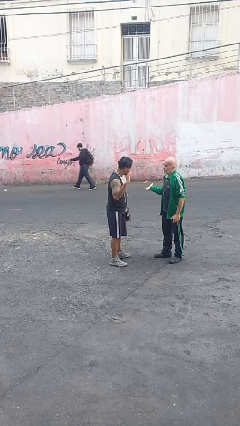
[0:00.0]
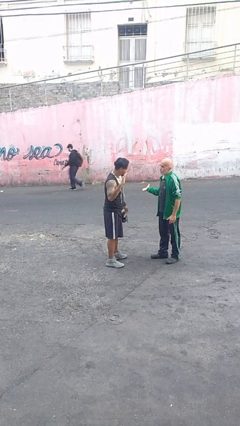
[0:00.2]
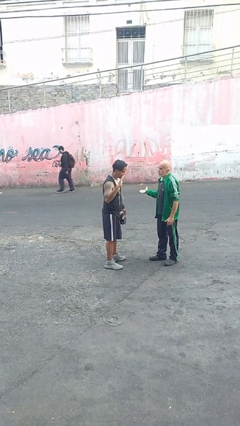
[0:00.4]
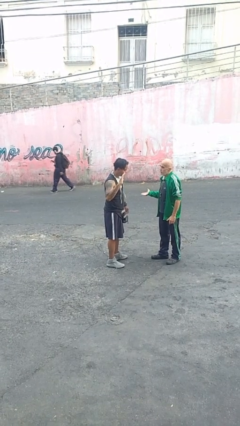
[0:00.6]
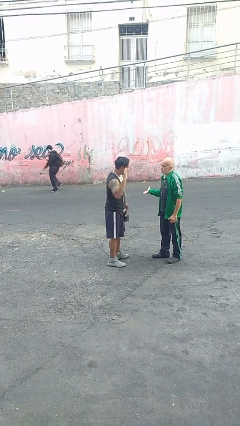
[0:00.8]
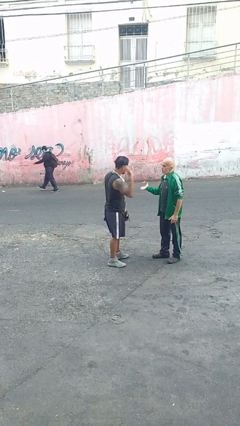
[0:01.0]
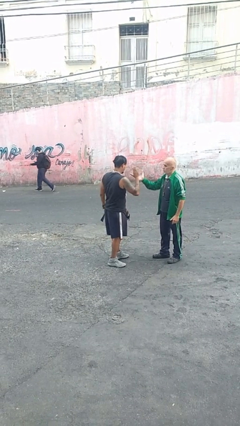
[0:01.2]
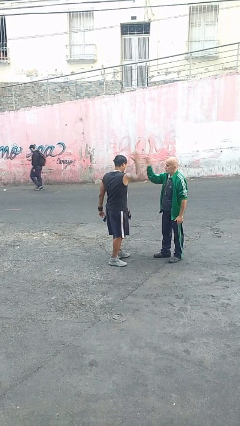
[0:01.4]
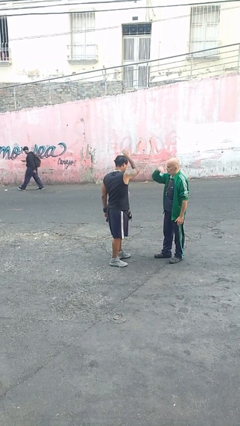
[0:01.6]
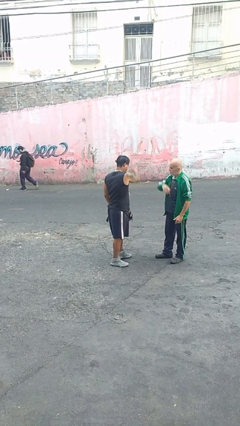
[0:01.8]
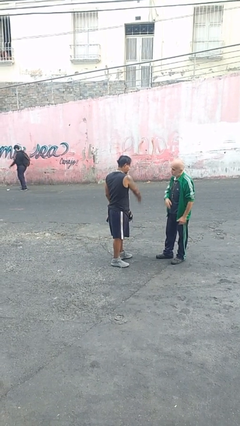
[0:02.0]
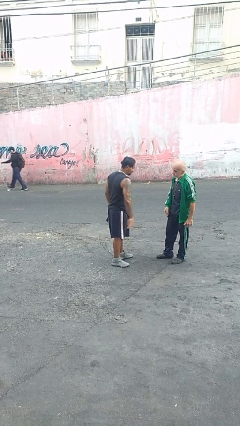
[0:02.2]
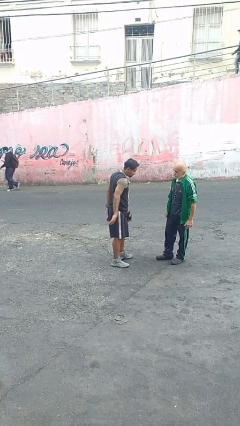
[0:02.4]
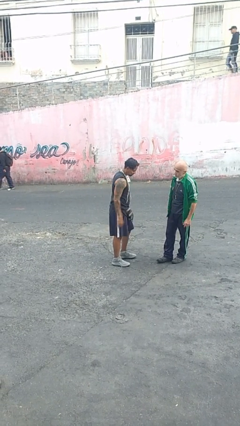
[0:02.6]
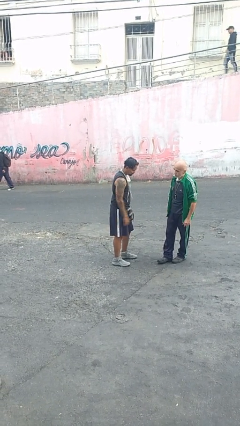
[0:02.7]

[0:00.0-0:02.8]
person highfives hand

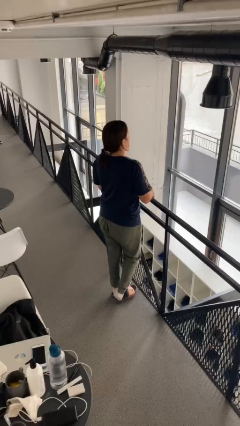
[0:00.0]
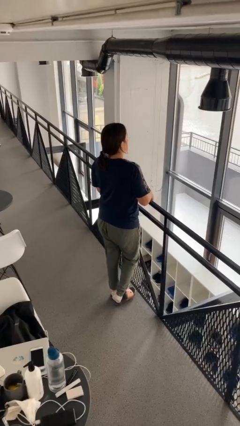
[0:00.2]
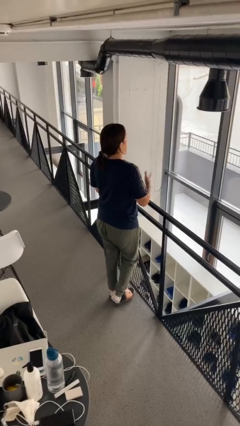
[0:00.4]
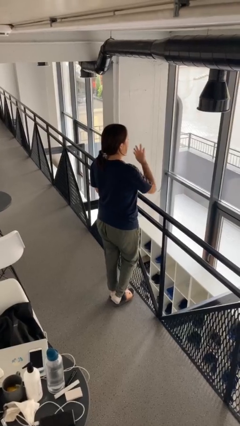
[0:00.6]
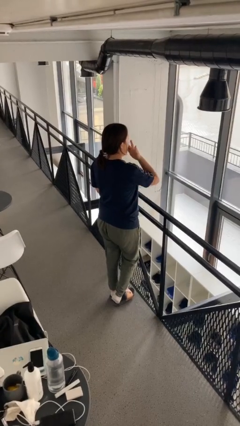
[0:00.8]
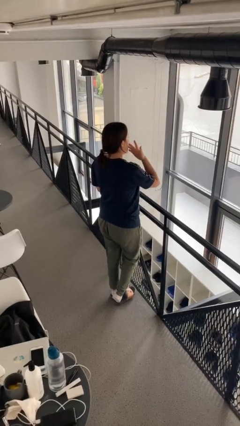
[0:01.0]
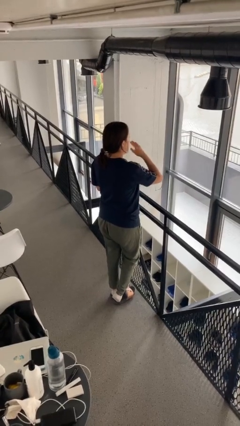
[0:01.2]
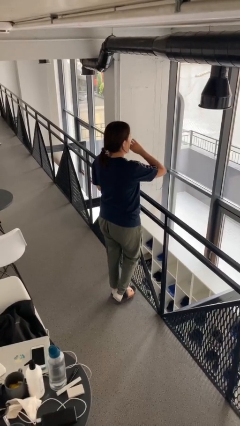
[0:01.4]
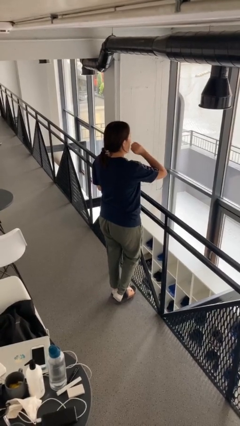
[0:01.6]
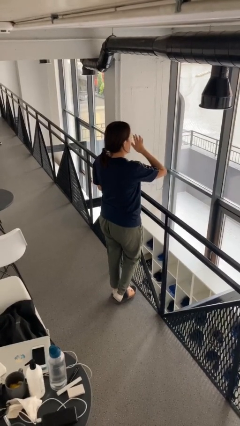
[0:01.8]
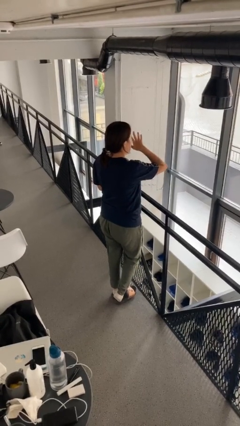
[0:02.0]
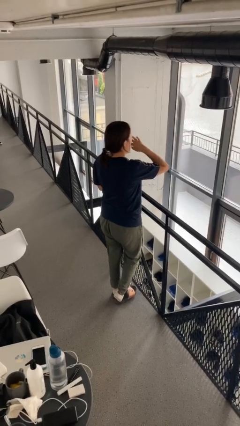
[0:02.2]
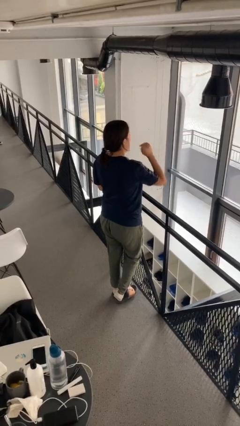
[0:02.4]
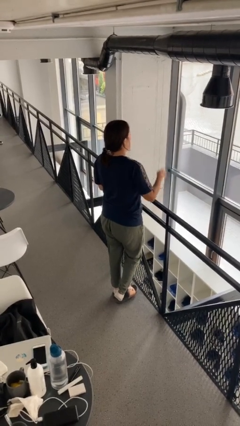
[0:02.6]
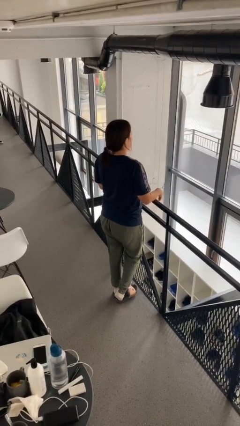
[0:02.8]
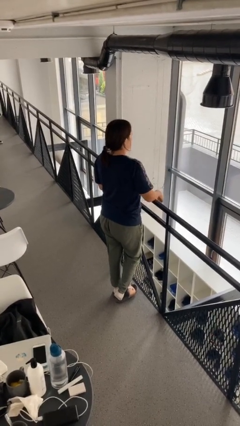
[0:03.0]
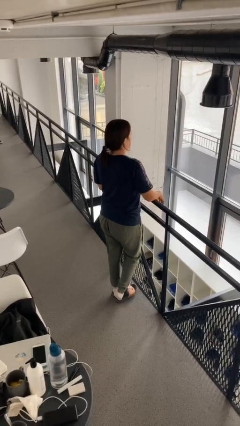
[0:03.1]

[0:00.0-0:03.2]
person licks fingers

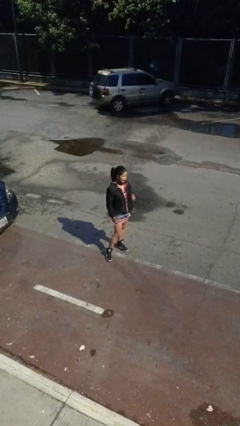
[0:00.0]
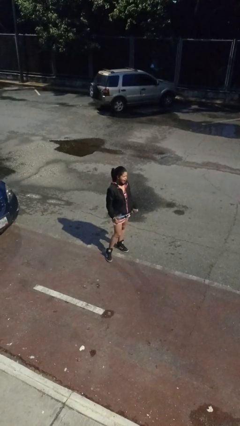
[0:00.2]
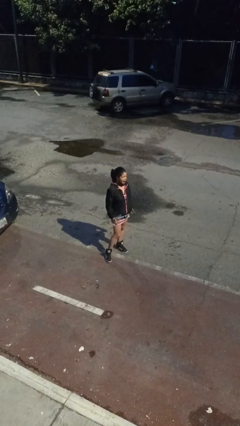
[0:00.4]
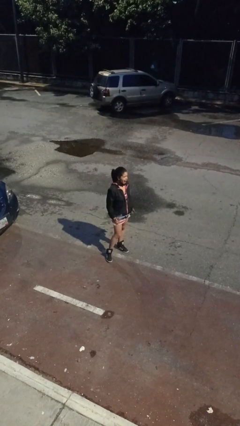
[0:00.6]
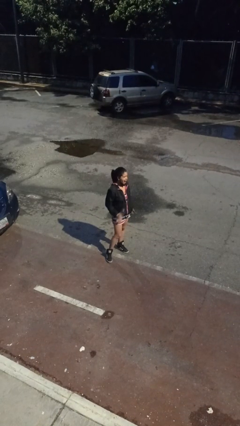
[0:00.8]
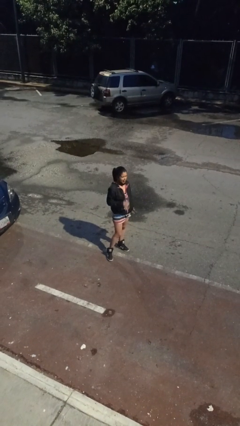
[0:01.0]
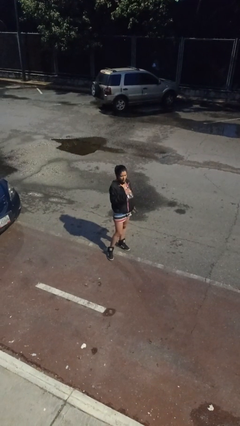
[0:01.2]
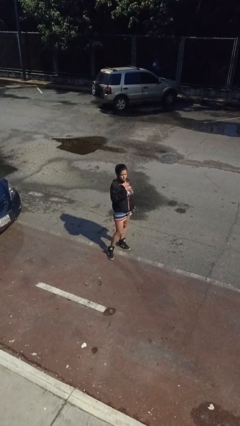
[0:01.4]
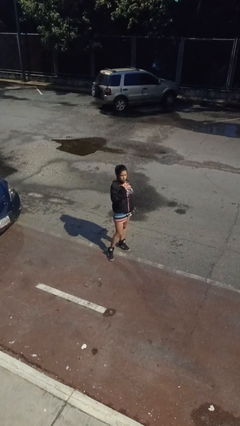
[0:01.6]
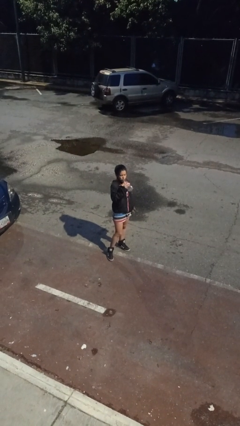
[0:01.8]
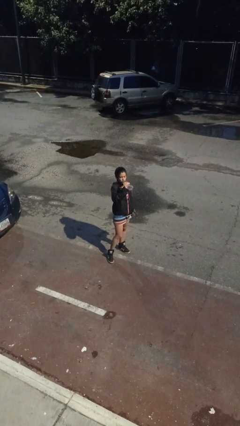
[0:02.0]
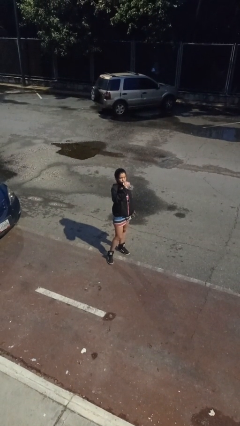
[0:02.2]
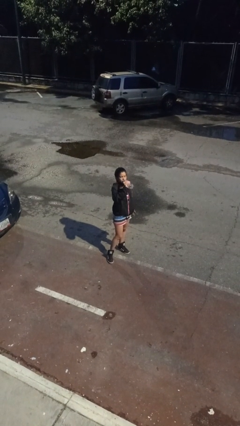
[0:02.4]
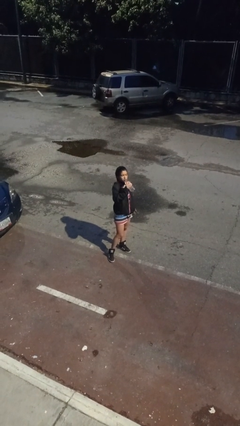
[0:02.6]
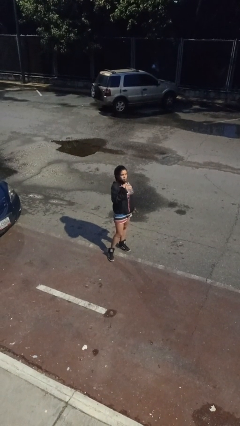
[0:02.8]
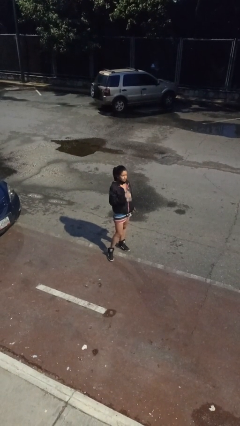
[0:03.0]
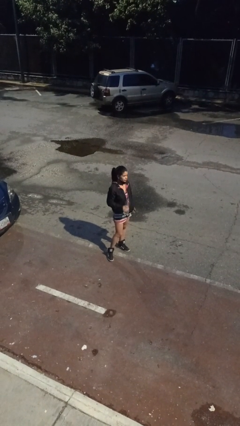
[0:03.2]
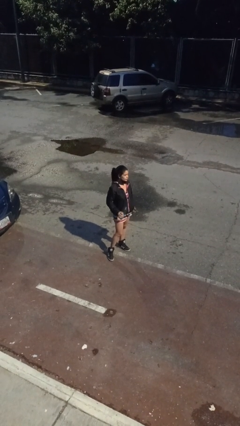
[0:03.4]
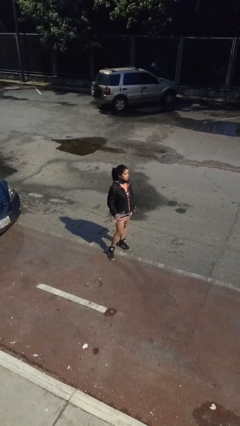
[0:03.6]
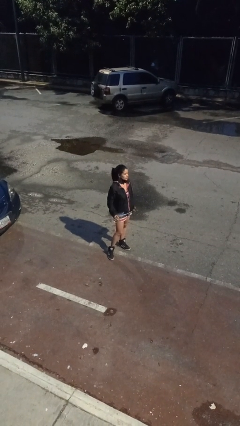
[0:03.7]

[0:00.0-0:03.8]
person drinks from bottle

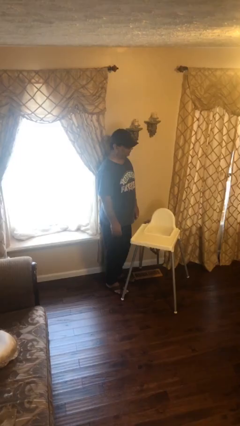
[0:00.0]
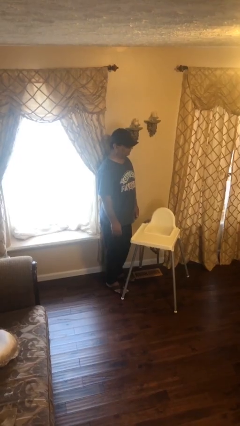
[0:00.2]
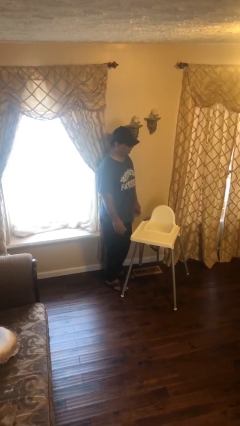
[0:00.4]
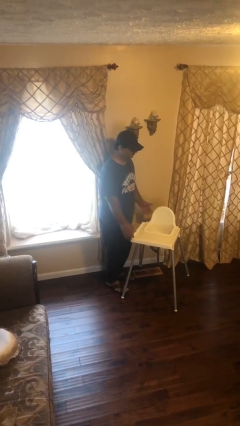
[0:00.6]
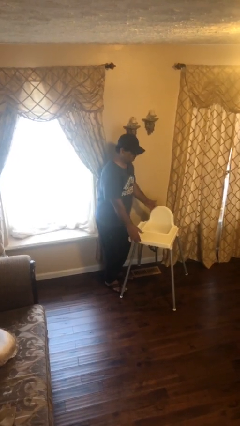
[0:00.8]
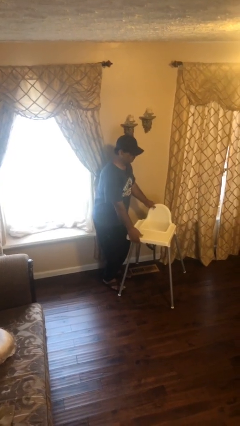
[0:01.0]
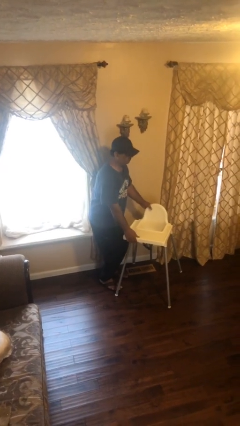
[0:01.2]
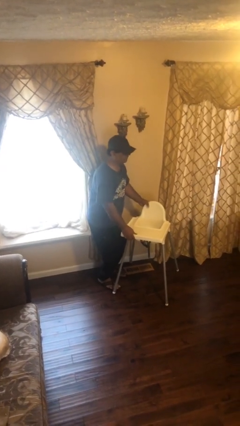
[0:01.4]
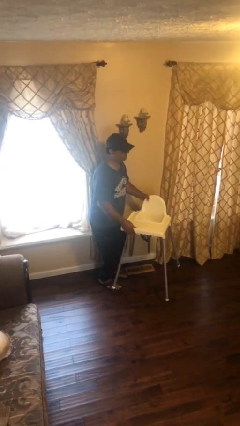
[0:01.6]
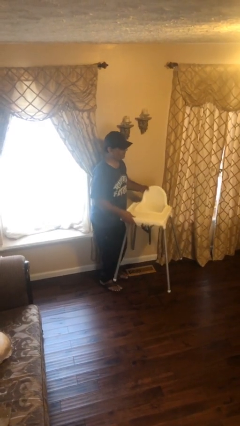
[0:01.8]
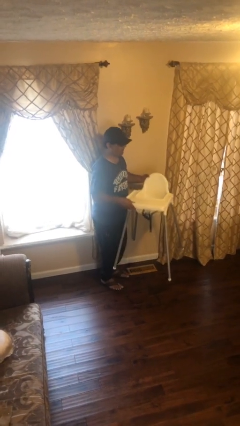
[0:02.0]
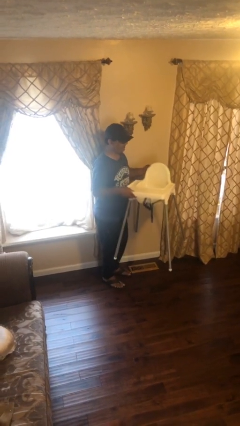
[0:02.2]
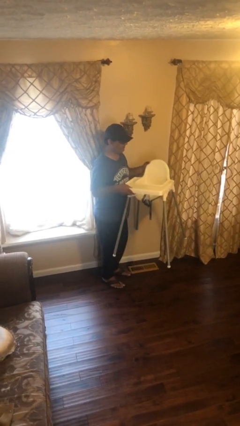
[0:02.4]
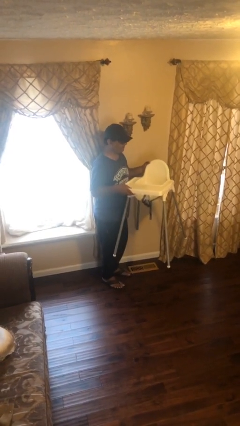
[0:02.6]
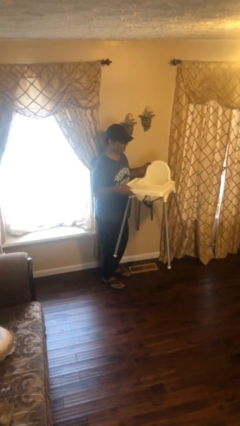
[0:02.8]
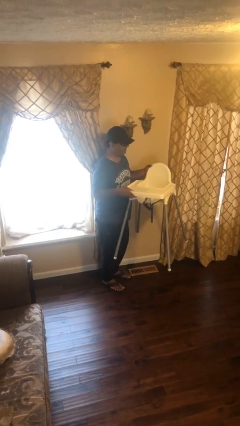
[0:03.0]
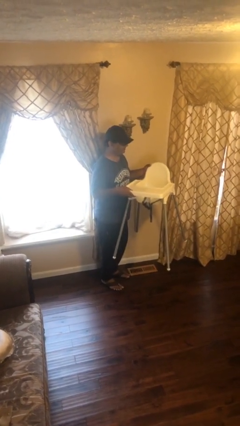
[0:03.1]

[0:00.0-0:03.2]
person picks up object from floor

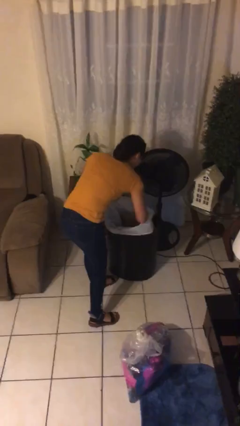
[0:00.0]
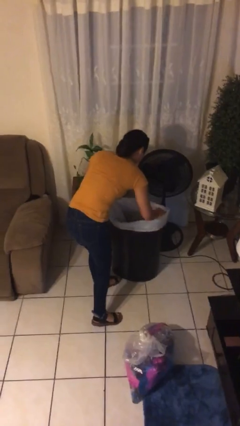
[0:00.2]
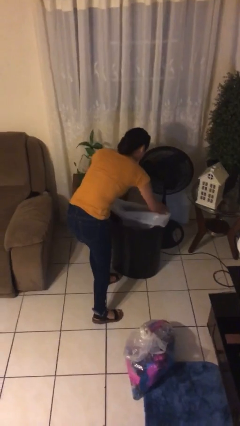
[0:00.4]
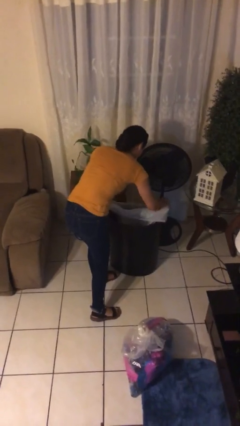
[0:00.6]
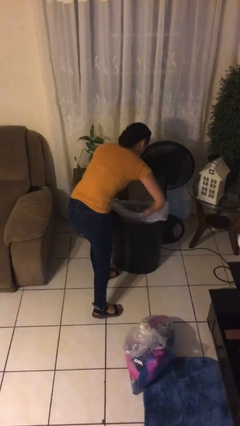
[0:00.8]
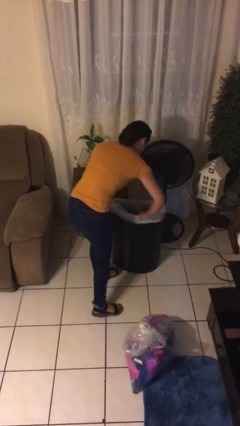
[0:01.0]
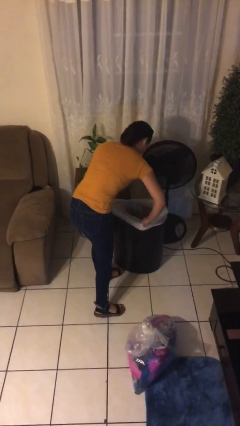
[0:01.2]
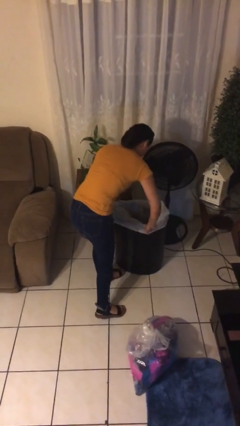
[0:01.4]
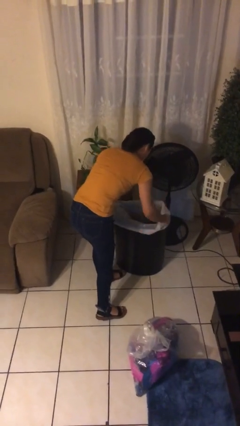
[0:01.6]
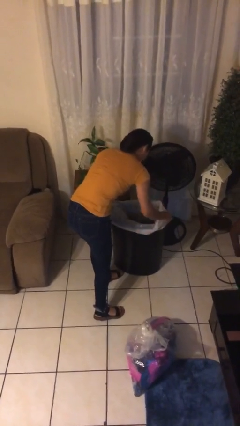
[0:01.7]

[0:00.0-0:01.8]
person inserts trashbag into trashcan

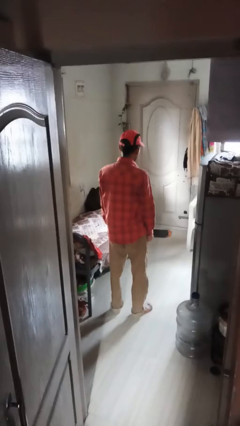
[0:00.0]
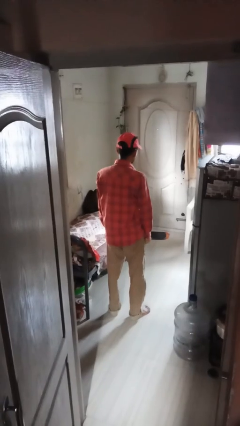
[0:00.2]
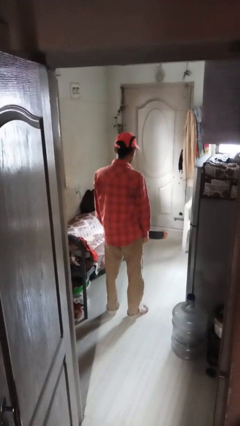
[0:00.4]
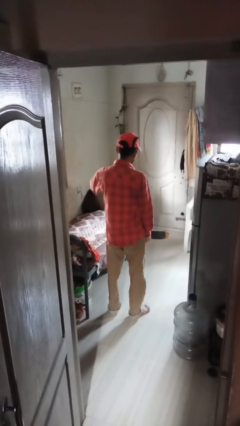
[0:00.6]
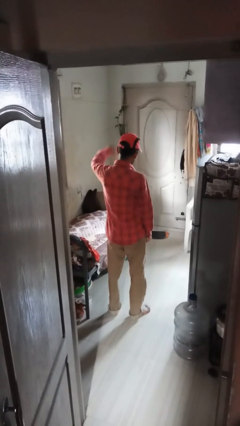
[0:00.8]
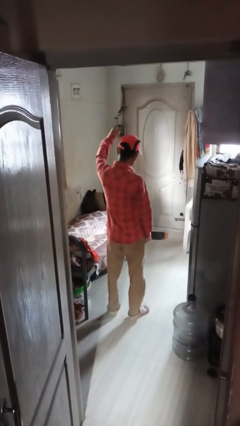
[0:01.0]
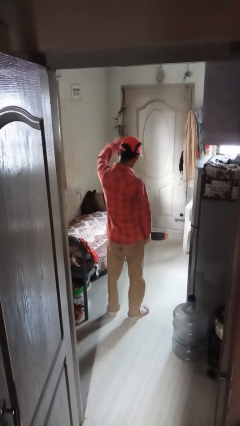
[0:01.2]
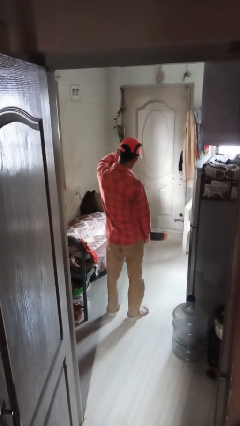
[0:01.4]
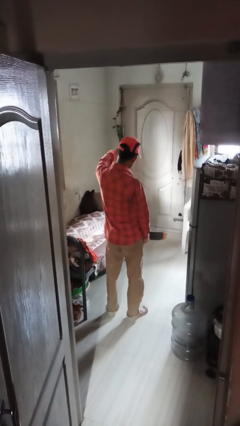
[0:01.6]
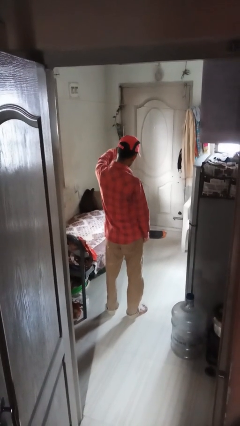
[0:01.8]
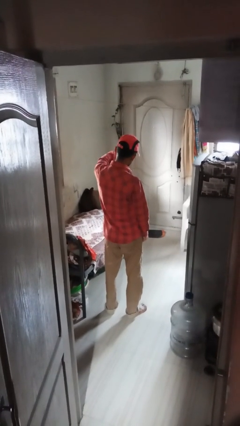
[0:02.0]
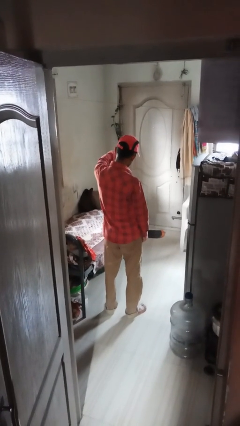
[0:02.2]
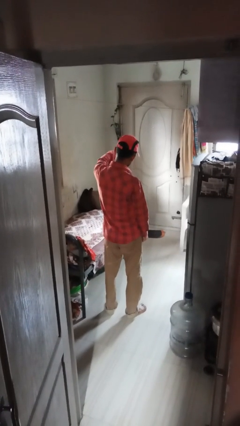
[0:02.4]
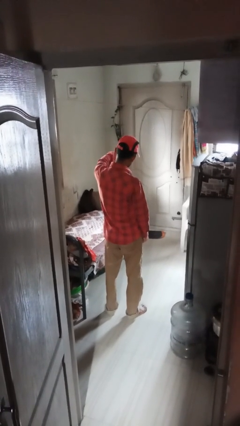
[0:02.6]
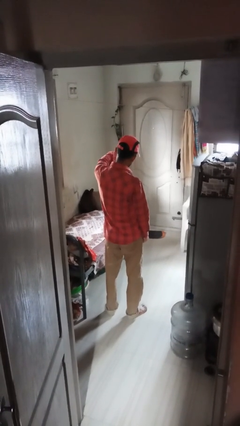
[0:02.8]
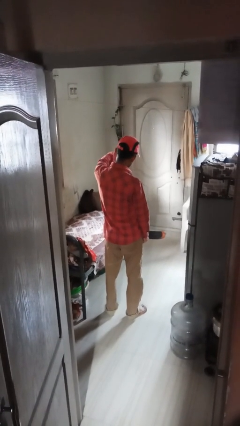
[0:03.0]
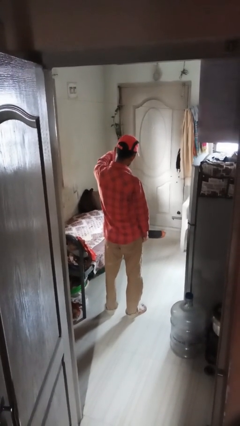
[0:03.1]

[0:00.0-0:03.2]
person gestures thumbs down
